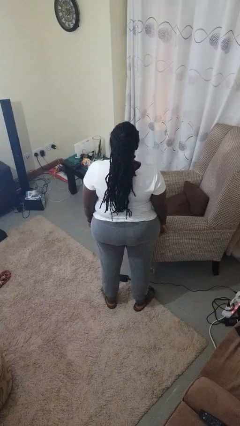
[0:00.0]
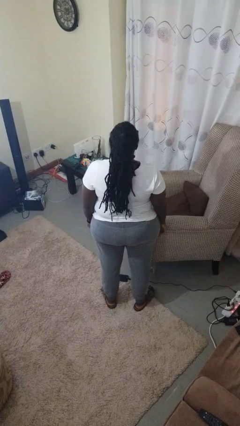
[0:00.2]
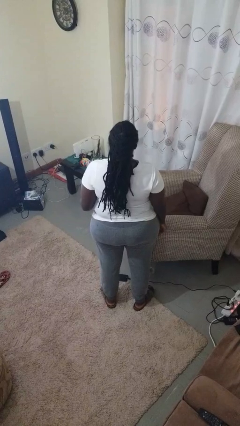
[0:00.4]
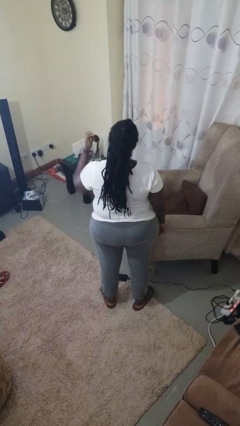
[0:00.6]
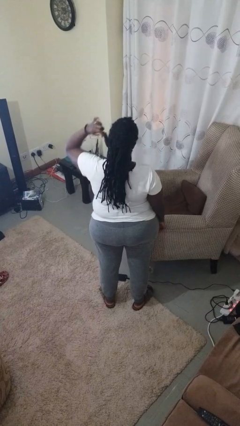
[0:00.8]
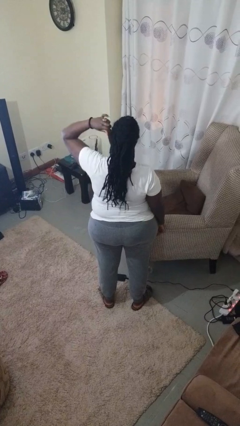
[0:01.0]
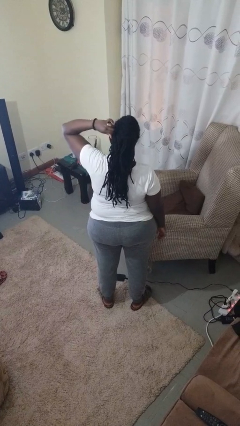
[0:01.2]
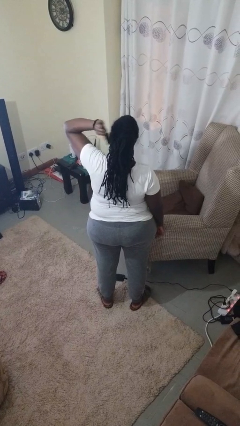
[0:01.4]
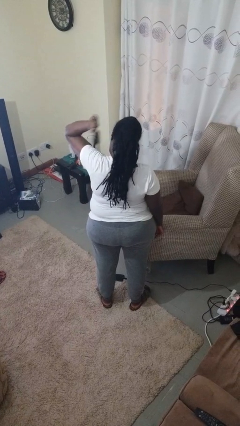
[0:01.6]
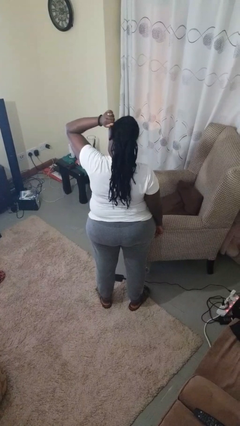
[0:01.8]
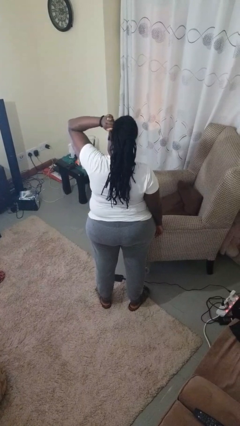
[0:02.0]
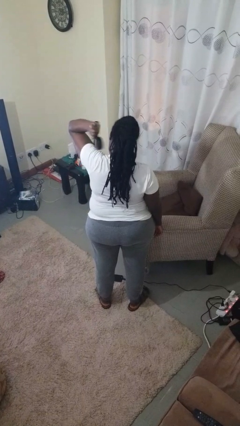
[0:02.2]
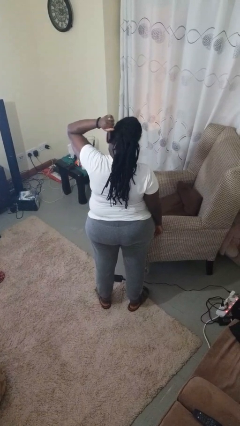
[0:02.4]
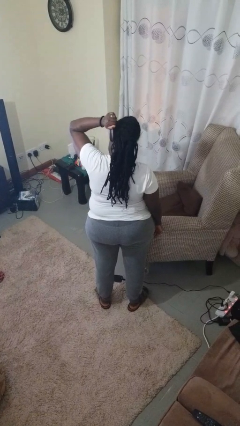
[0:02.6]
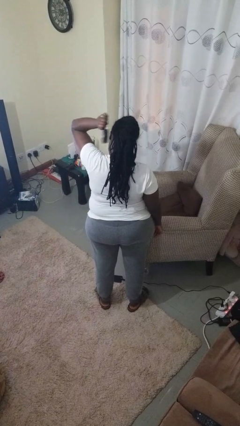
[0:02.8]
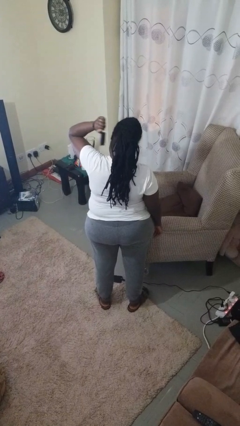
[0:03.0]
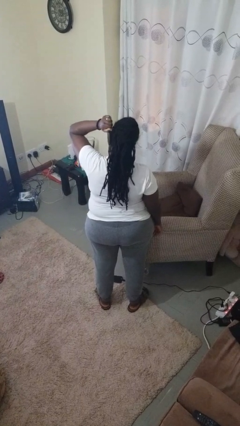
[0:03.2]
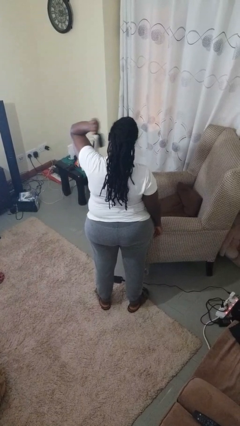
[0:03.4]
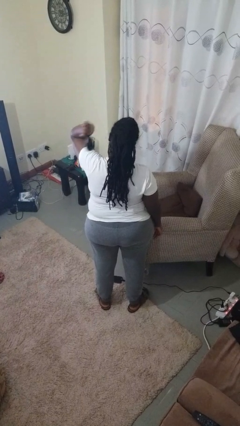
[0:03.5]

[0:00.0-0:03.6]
person brushes hair

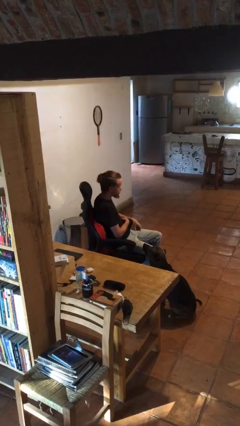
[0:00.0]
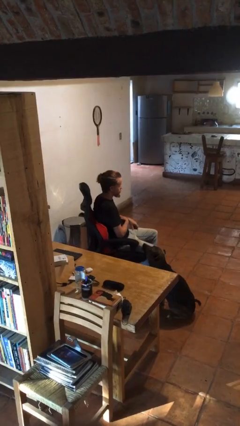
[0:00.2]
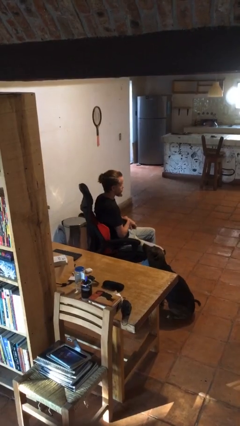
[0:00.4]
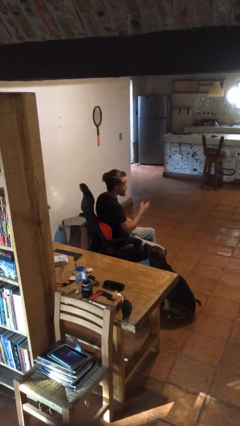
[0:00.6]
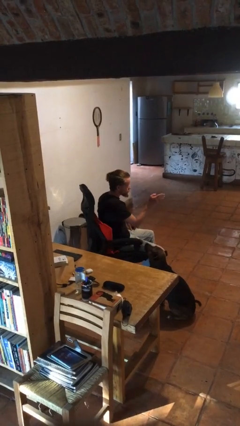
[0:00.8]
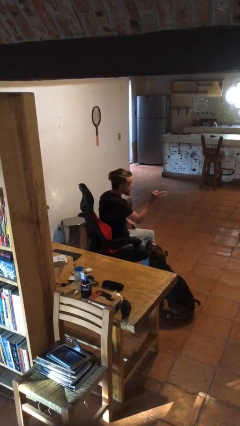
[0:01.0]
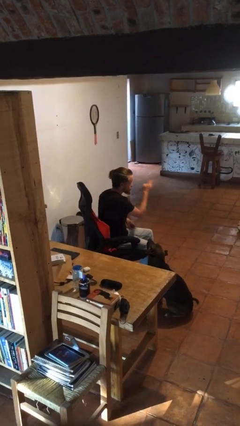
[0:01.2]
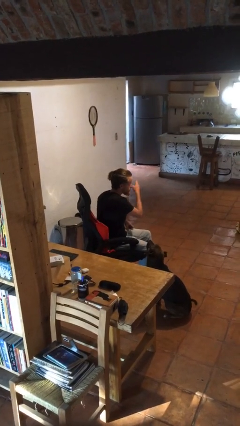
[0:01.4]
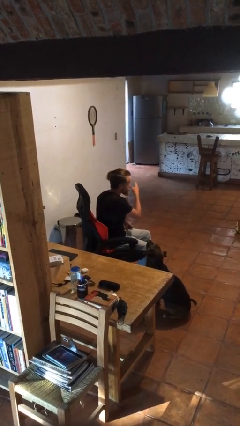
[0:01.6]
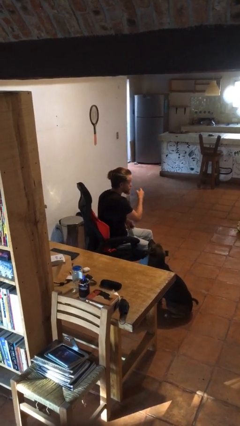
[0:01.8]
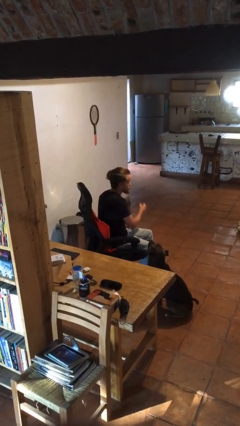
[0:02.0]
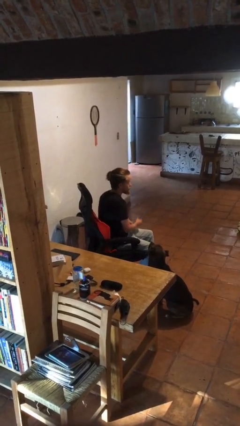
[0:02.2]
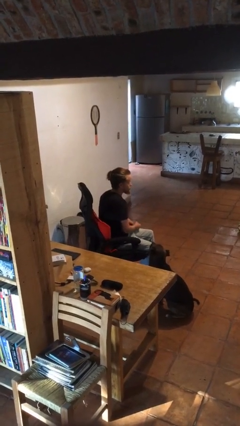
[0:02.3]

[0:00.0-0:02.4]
person gestures swipe left

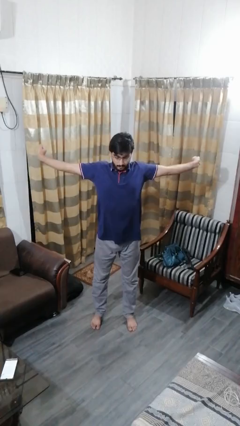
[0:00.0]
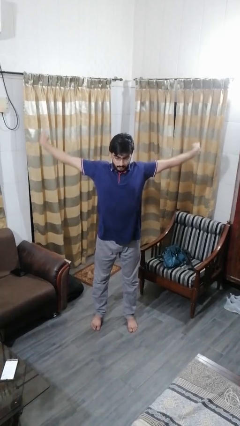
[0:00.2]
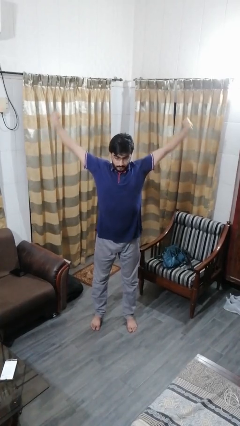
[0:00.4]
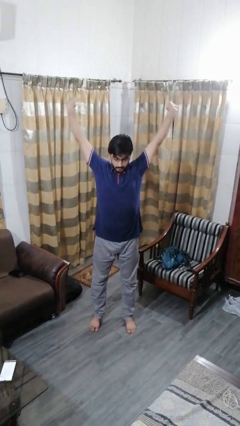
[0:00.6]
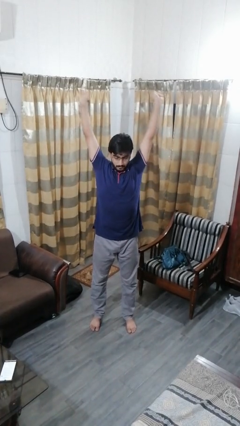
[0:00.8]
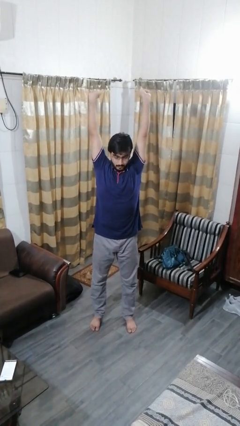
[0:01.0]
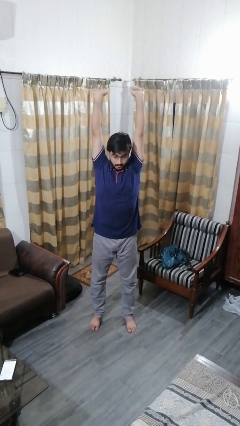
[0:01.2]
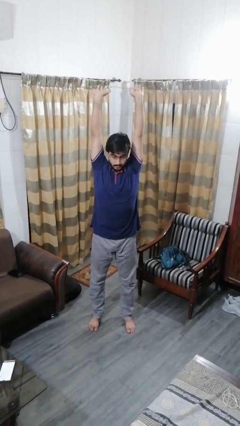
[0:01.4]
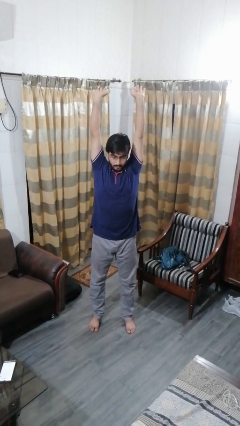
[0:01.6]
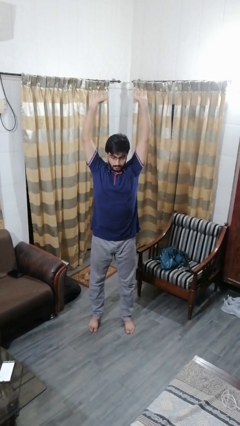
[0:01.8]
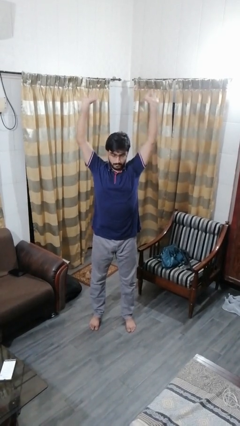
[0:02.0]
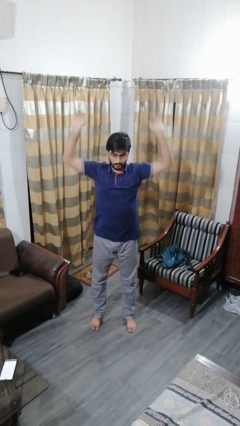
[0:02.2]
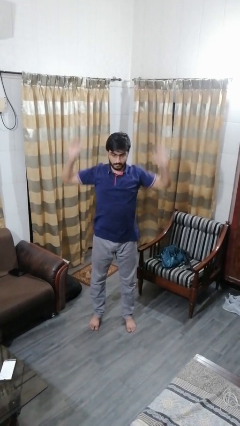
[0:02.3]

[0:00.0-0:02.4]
person stretches arms over head

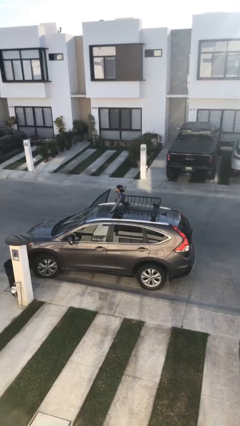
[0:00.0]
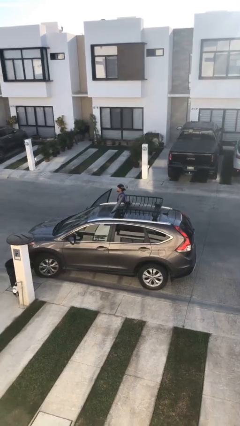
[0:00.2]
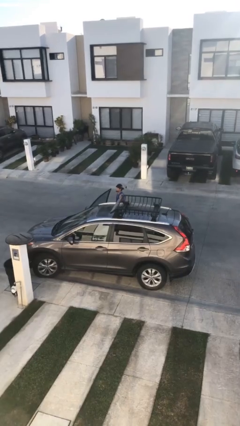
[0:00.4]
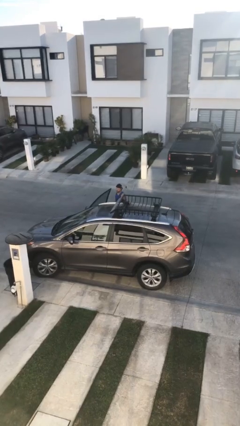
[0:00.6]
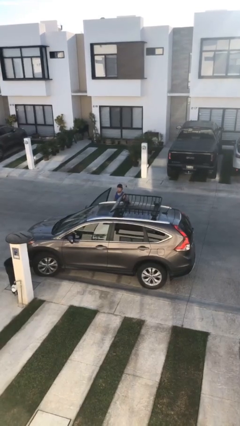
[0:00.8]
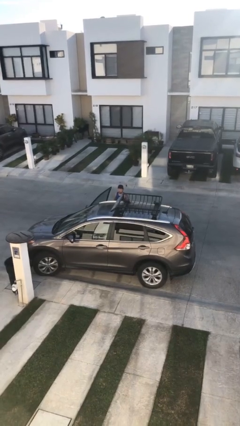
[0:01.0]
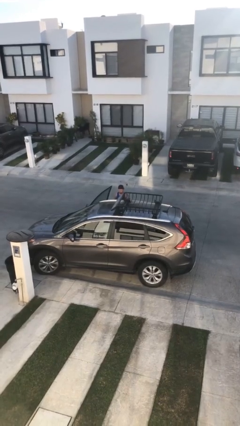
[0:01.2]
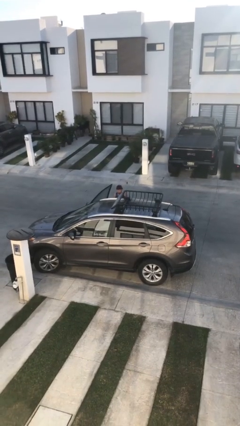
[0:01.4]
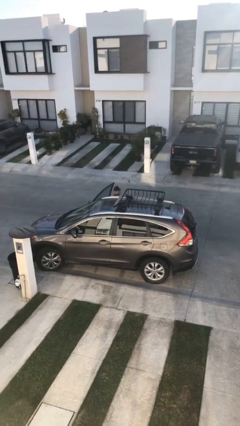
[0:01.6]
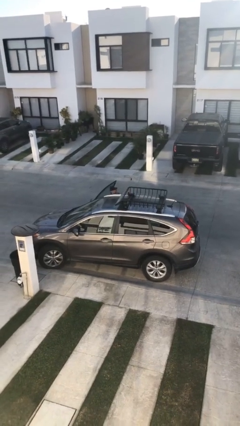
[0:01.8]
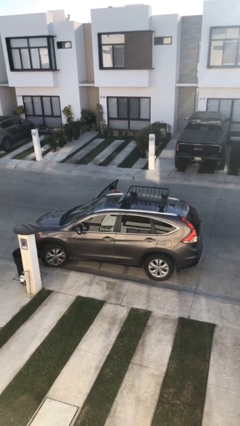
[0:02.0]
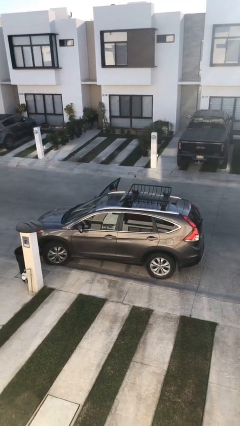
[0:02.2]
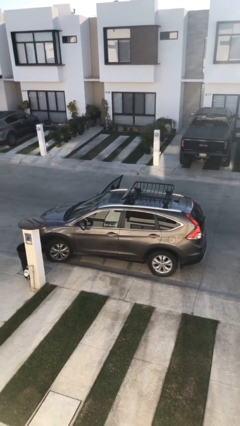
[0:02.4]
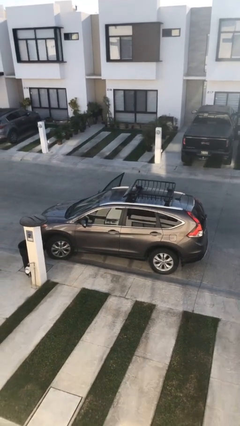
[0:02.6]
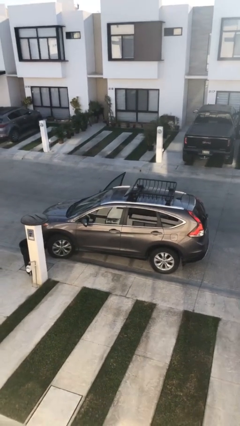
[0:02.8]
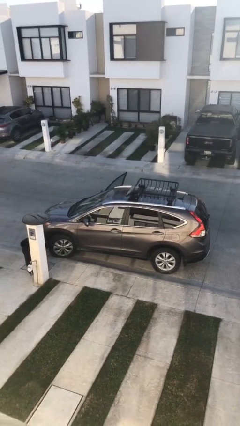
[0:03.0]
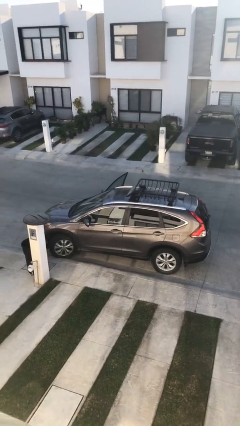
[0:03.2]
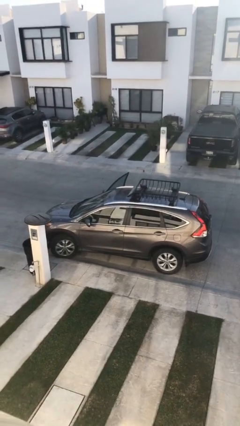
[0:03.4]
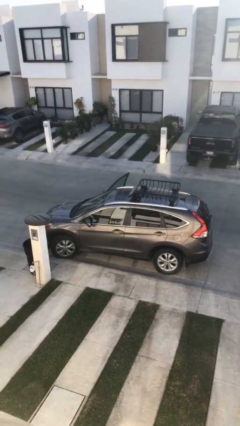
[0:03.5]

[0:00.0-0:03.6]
person enters car

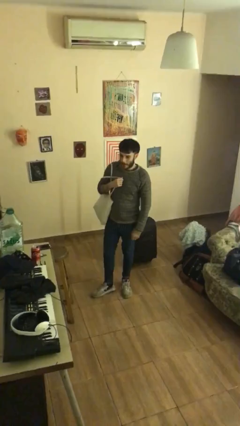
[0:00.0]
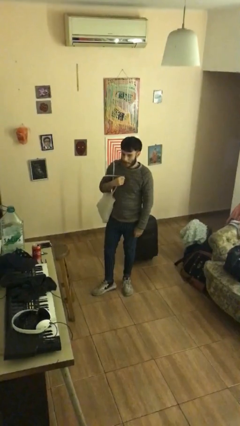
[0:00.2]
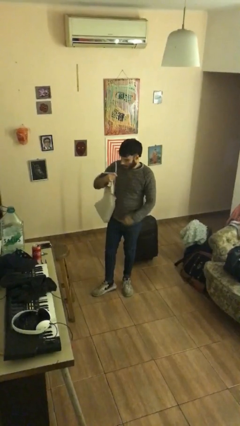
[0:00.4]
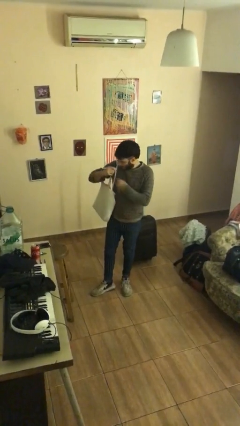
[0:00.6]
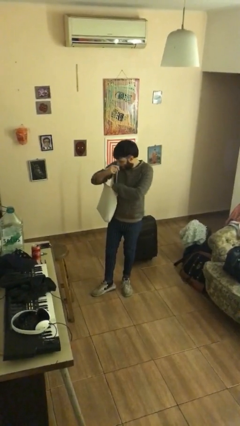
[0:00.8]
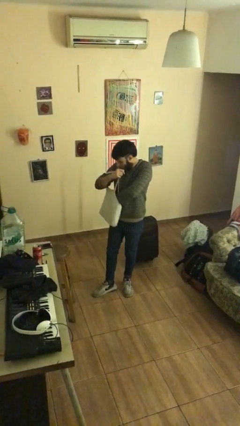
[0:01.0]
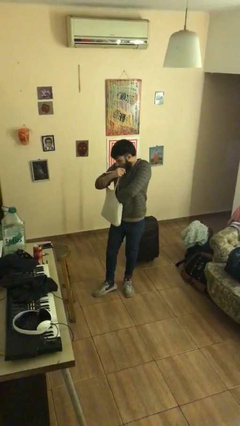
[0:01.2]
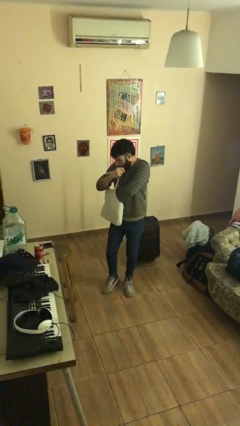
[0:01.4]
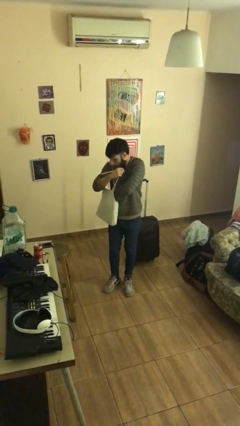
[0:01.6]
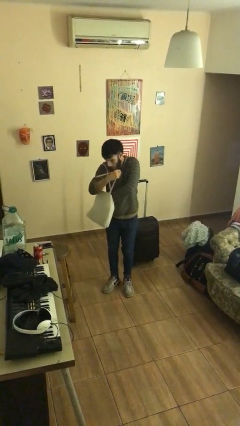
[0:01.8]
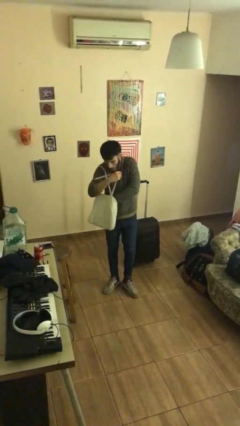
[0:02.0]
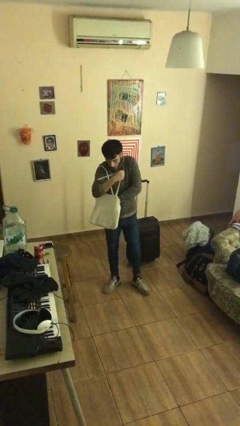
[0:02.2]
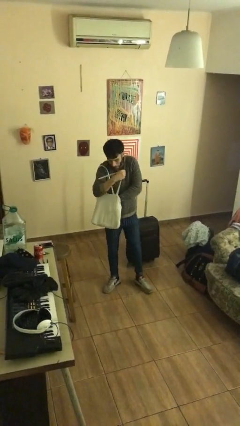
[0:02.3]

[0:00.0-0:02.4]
person searches in purse

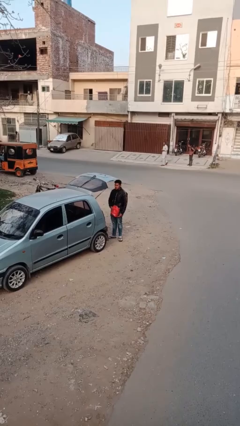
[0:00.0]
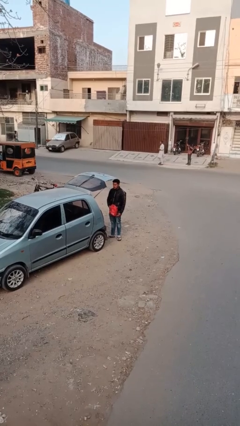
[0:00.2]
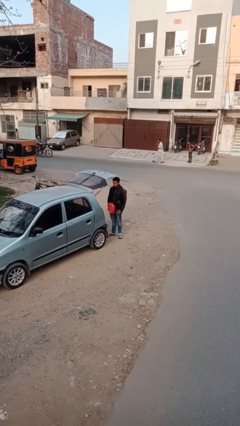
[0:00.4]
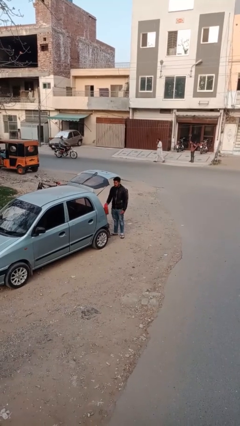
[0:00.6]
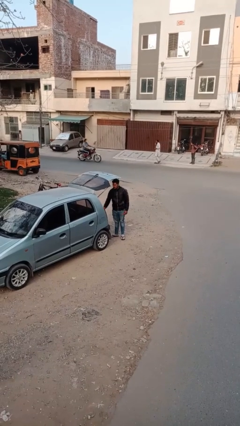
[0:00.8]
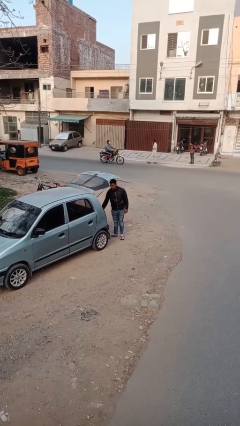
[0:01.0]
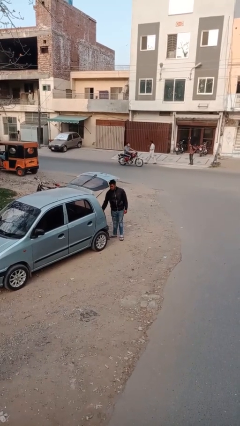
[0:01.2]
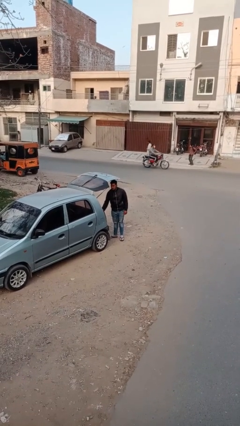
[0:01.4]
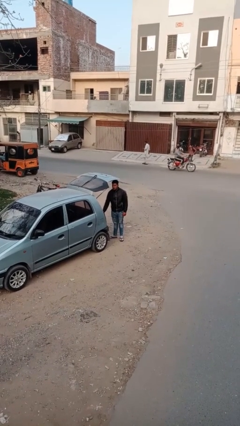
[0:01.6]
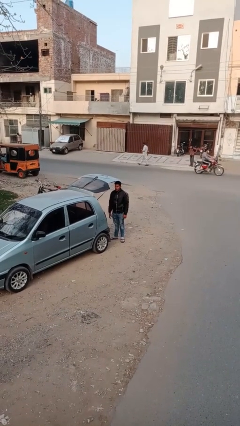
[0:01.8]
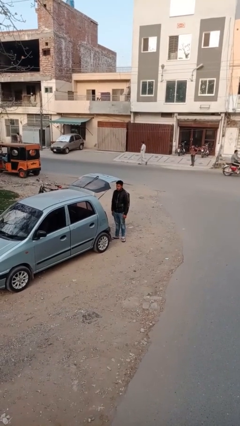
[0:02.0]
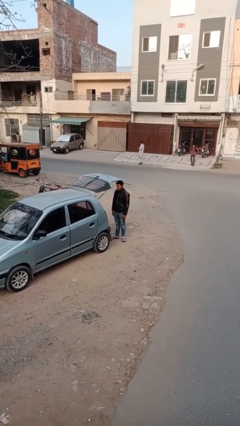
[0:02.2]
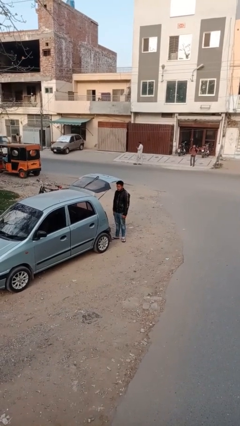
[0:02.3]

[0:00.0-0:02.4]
person loads car

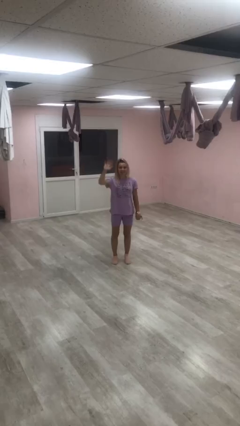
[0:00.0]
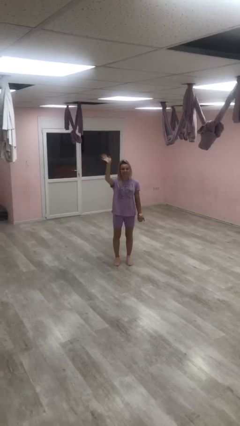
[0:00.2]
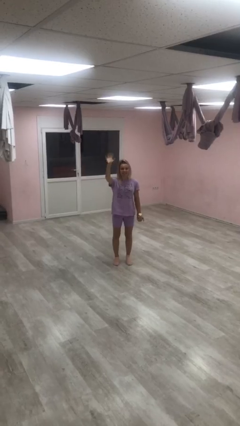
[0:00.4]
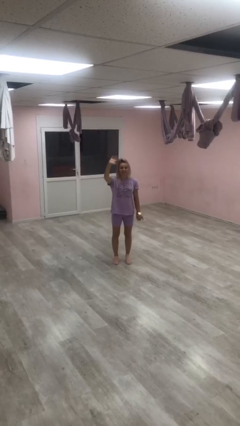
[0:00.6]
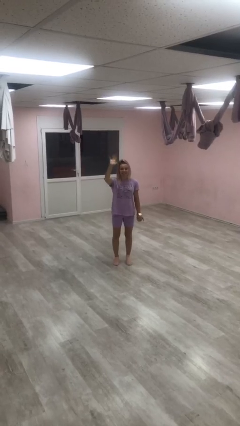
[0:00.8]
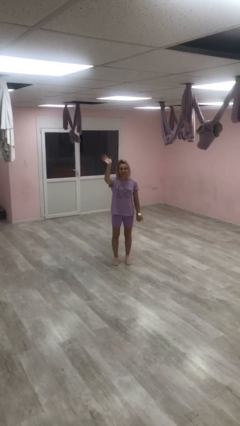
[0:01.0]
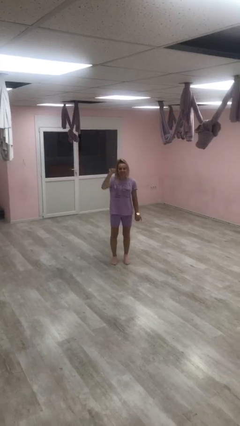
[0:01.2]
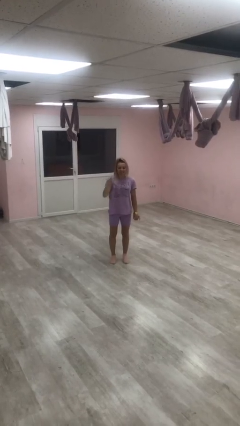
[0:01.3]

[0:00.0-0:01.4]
person waves at person
